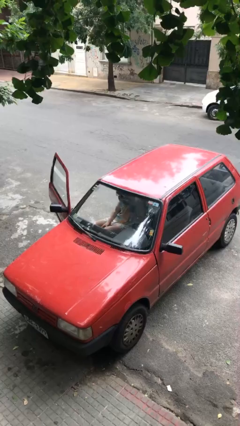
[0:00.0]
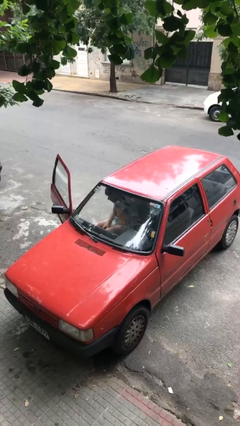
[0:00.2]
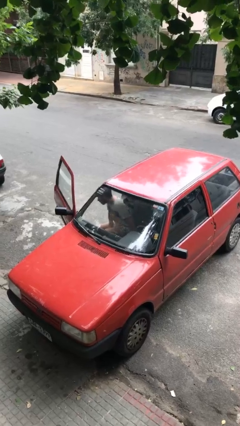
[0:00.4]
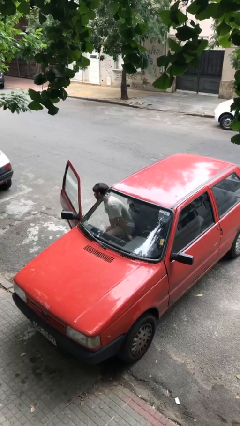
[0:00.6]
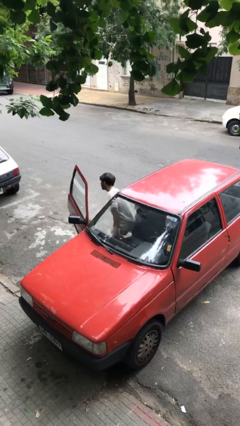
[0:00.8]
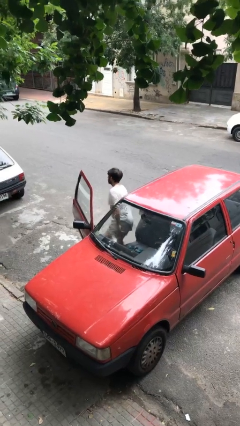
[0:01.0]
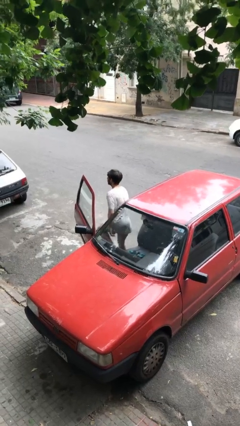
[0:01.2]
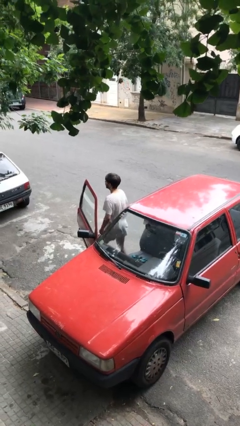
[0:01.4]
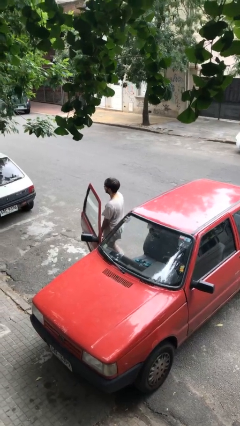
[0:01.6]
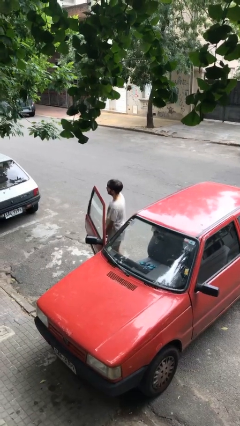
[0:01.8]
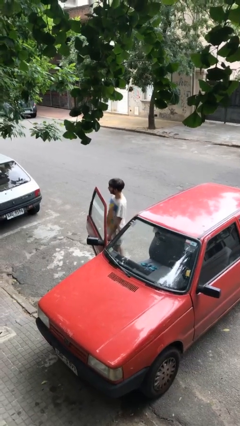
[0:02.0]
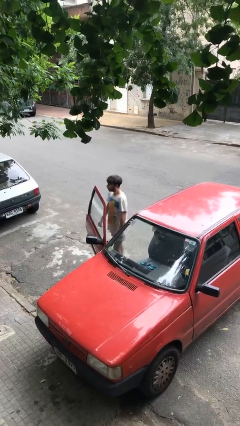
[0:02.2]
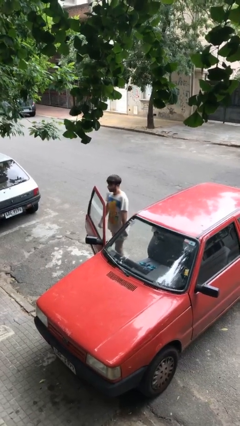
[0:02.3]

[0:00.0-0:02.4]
person exits car

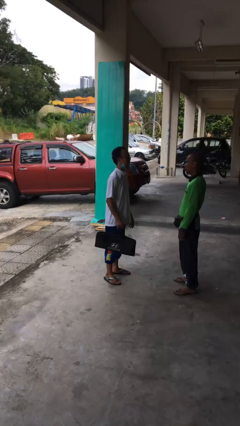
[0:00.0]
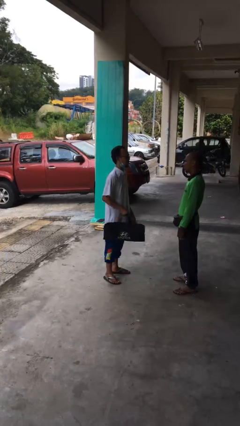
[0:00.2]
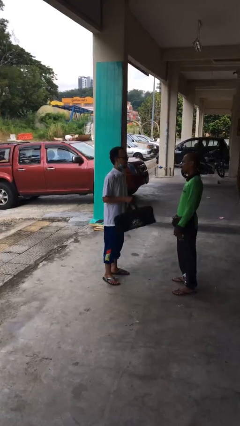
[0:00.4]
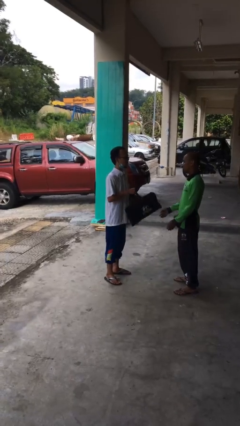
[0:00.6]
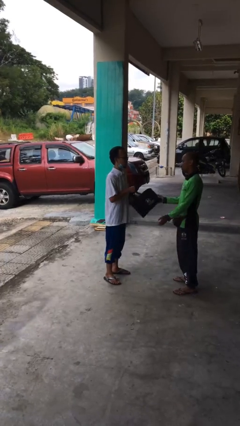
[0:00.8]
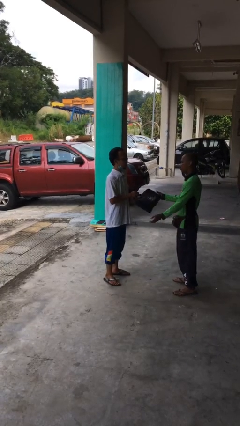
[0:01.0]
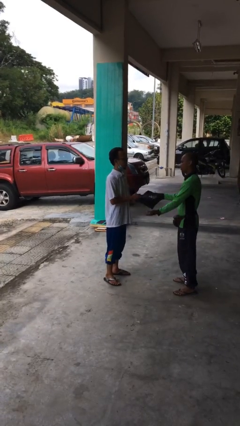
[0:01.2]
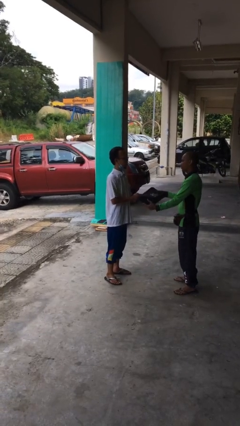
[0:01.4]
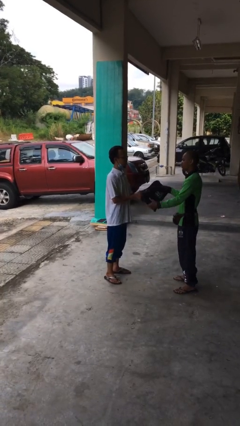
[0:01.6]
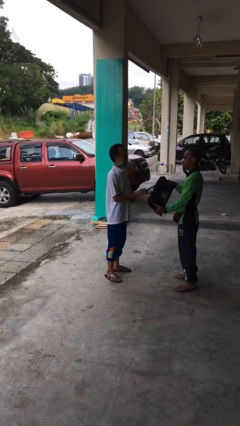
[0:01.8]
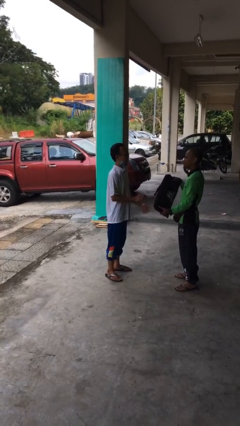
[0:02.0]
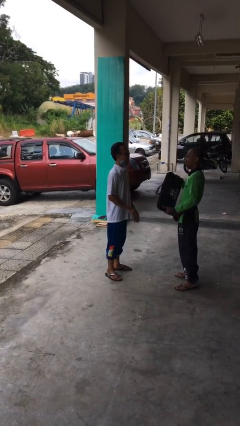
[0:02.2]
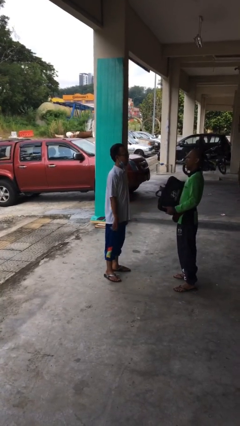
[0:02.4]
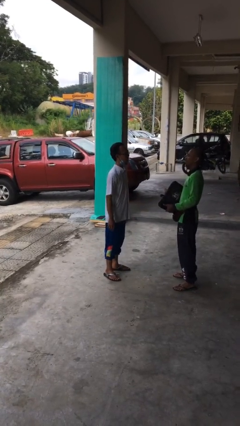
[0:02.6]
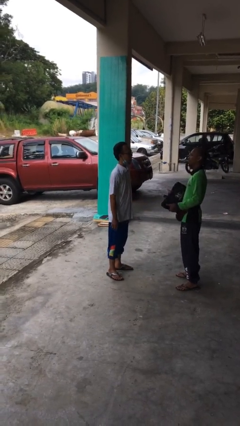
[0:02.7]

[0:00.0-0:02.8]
person transfers object to person

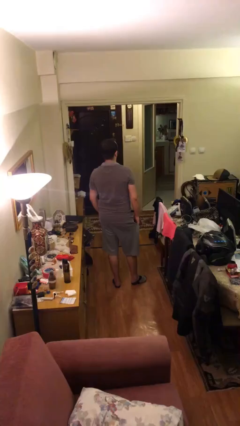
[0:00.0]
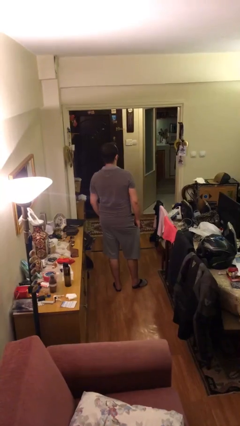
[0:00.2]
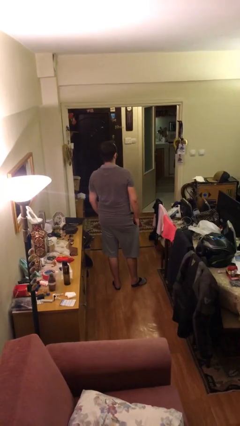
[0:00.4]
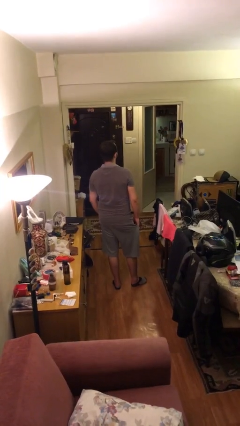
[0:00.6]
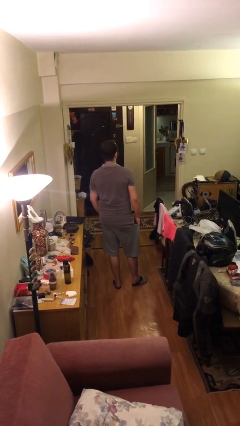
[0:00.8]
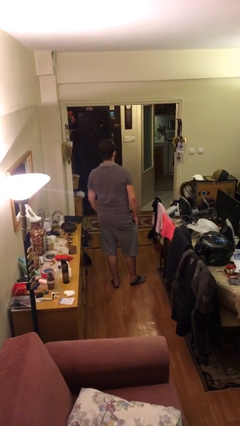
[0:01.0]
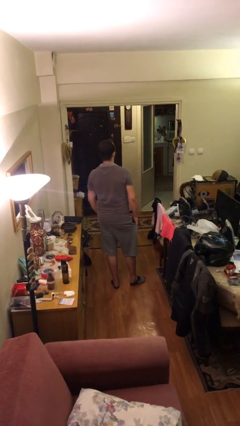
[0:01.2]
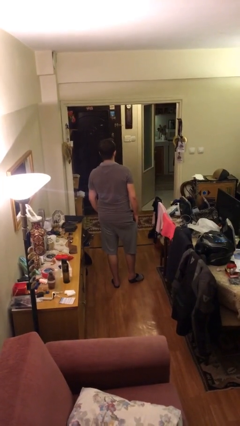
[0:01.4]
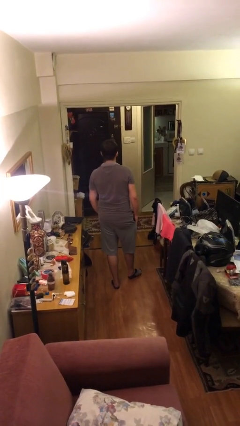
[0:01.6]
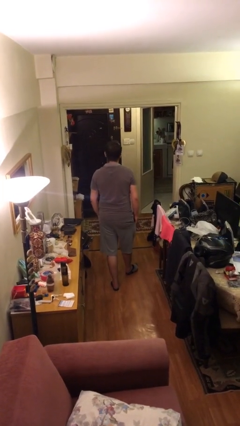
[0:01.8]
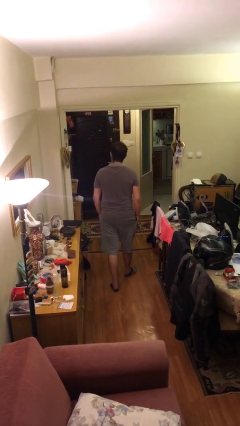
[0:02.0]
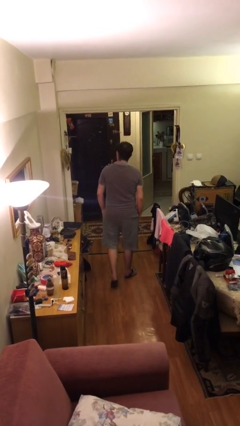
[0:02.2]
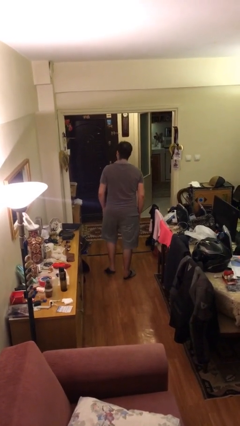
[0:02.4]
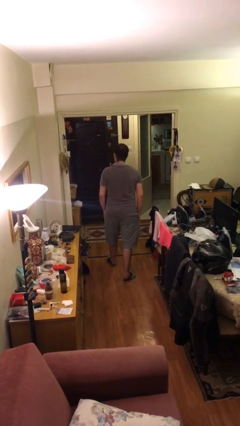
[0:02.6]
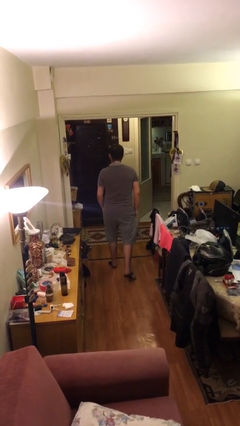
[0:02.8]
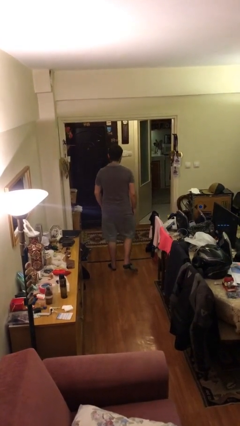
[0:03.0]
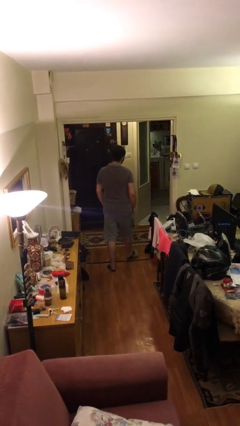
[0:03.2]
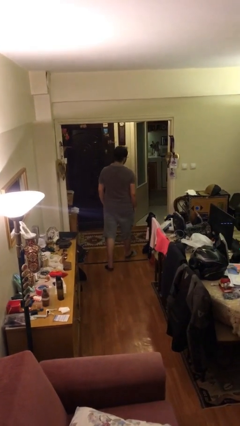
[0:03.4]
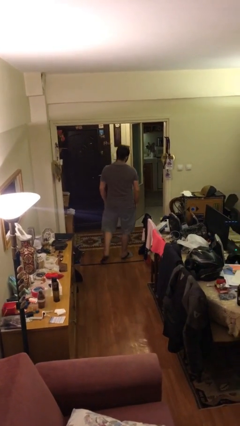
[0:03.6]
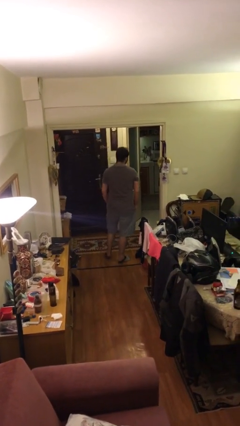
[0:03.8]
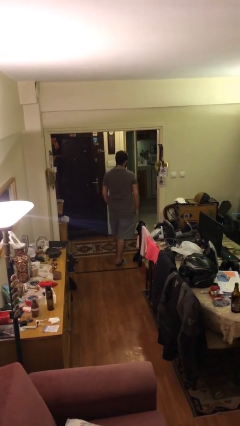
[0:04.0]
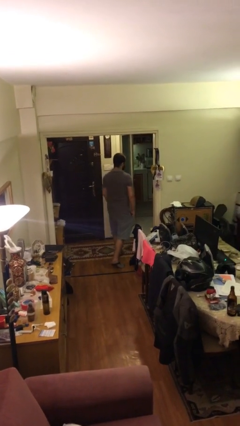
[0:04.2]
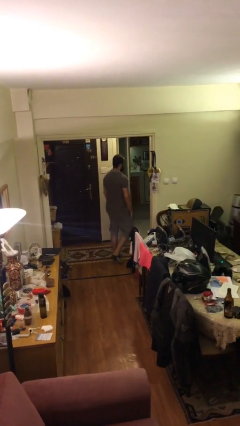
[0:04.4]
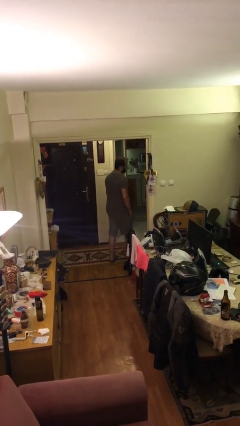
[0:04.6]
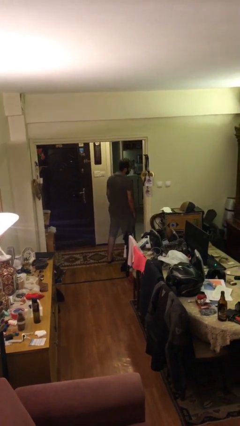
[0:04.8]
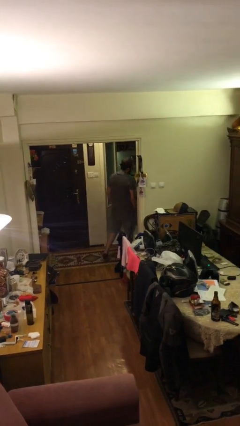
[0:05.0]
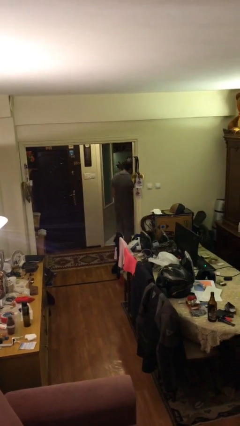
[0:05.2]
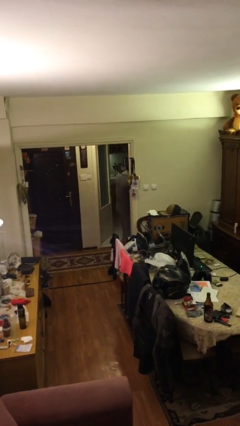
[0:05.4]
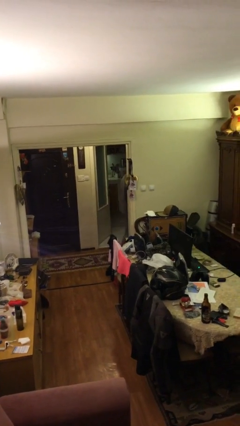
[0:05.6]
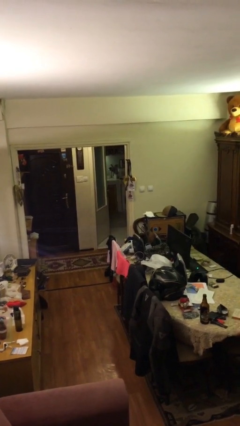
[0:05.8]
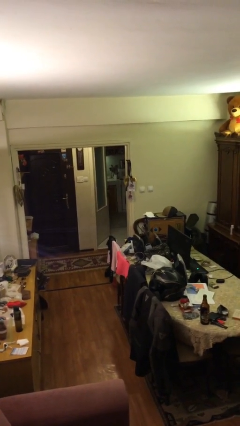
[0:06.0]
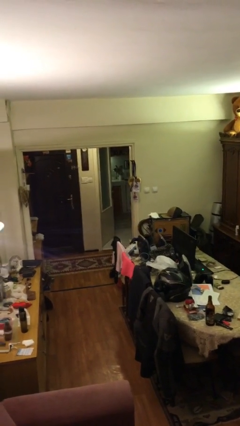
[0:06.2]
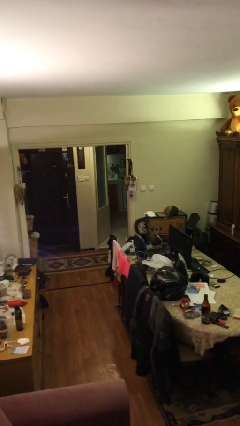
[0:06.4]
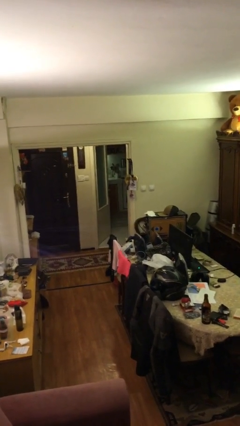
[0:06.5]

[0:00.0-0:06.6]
person exits scene through structure

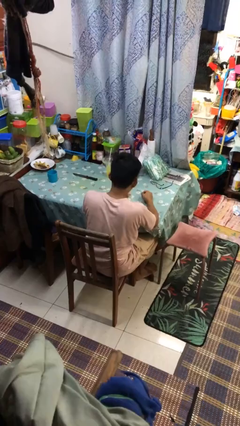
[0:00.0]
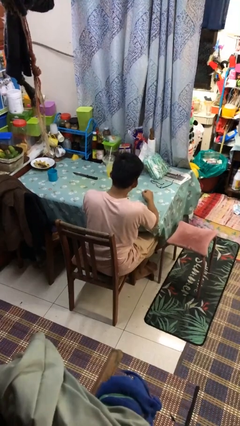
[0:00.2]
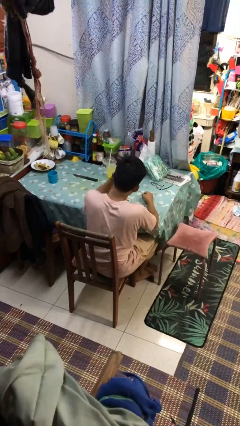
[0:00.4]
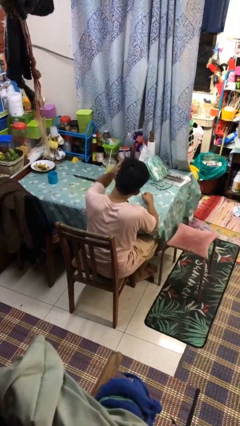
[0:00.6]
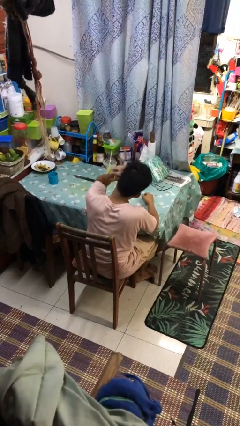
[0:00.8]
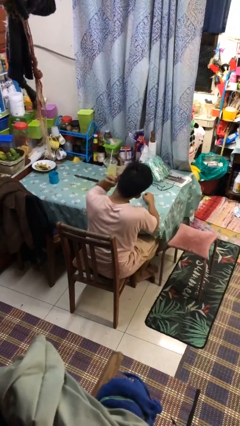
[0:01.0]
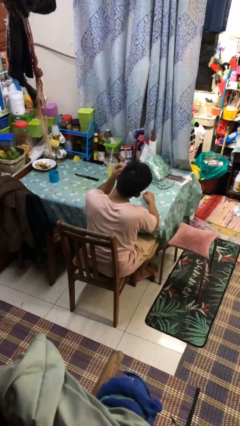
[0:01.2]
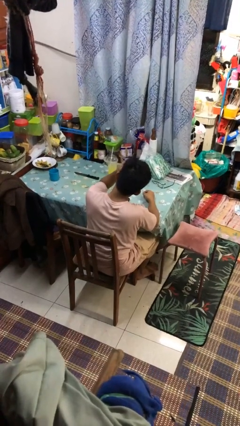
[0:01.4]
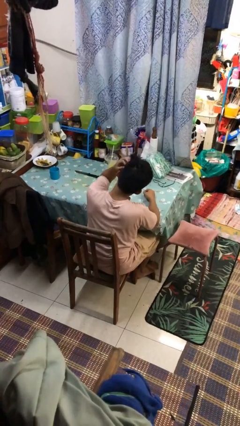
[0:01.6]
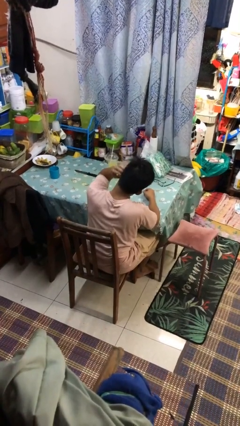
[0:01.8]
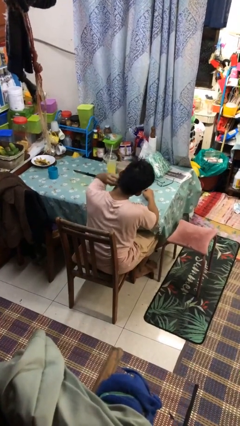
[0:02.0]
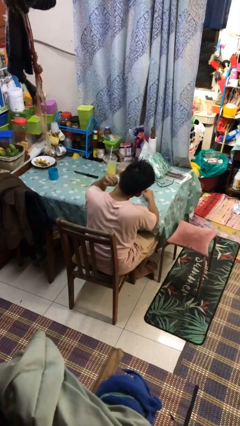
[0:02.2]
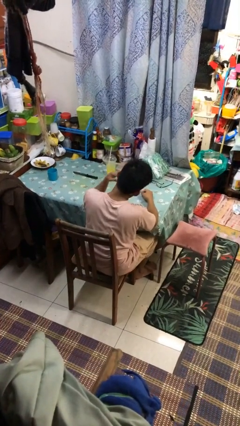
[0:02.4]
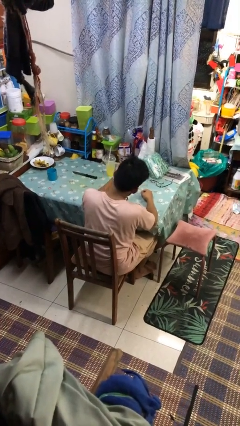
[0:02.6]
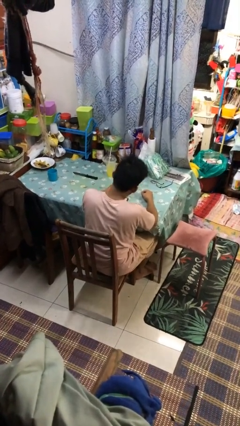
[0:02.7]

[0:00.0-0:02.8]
person strokes hair

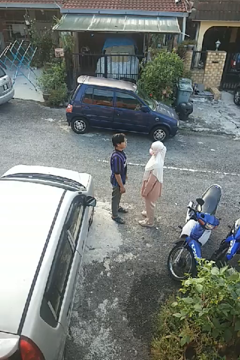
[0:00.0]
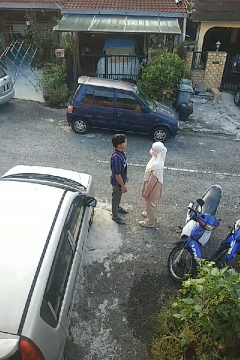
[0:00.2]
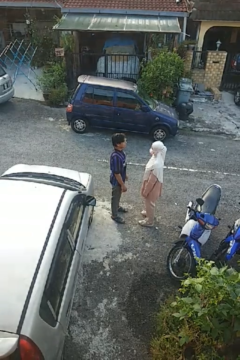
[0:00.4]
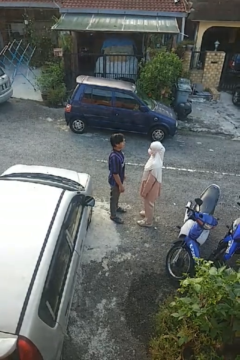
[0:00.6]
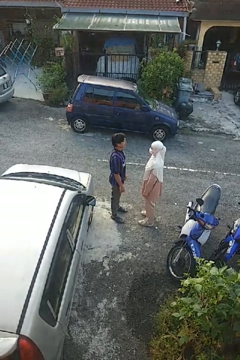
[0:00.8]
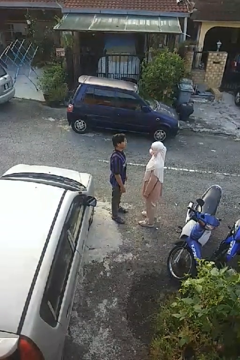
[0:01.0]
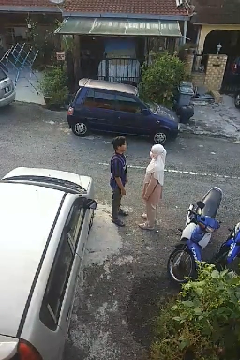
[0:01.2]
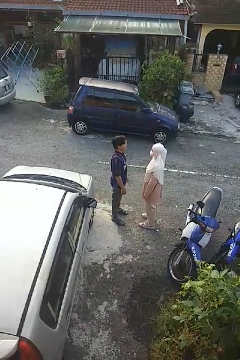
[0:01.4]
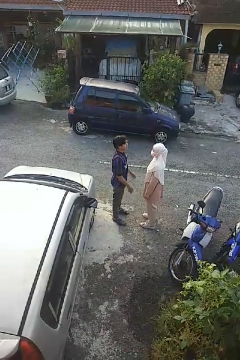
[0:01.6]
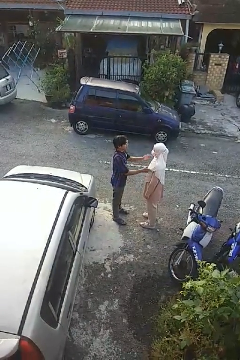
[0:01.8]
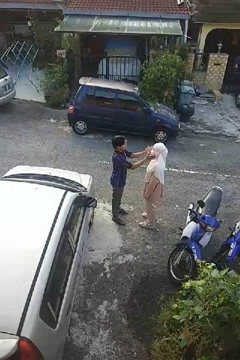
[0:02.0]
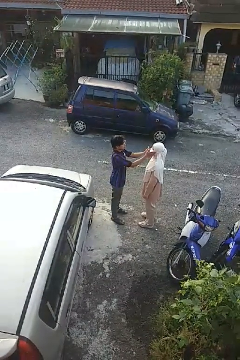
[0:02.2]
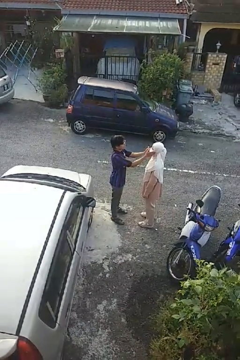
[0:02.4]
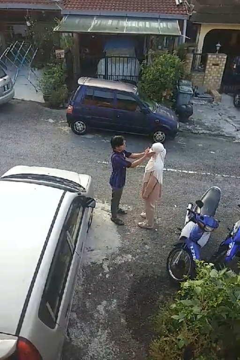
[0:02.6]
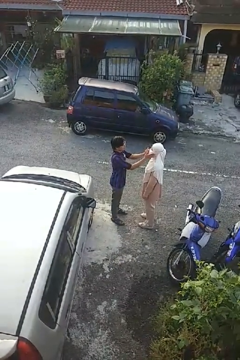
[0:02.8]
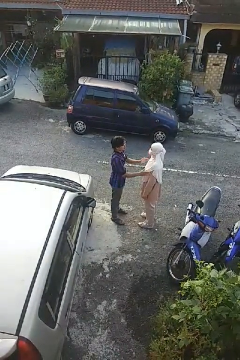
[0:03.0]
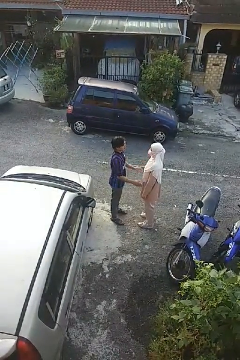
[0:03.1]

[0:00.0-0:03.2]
person touches face of person
